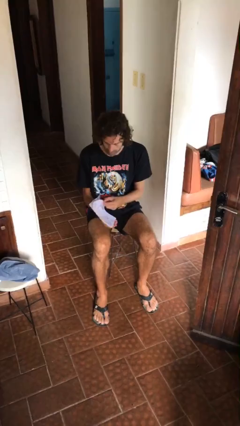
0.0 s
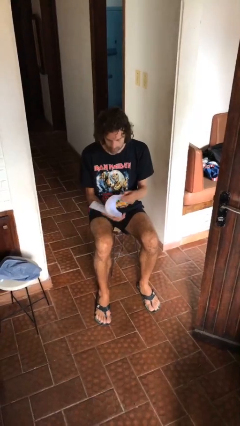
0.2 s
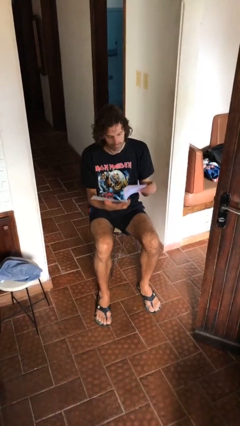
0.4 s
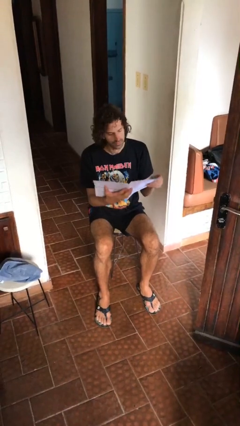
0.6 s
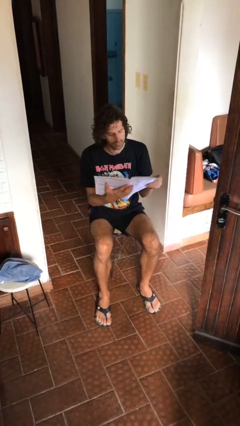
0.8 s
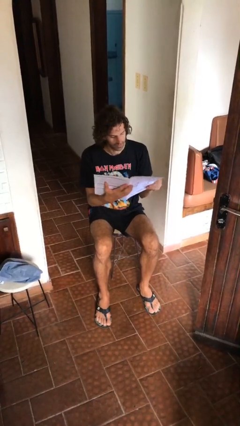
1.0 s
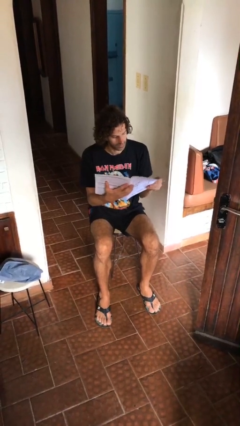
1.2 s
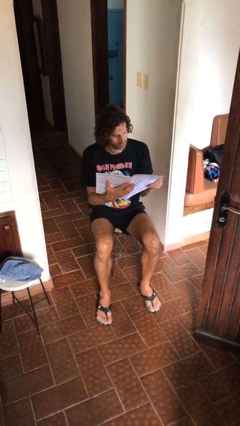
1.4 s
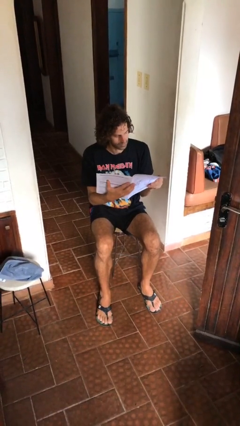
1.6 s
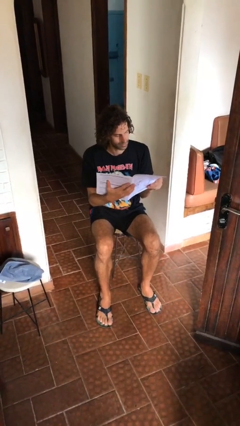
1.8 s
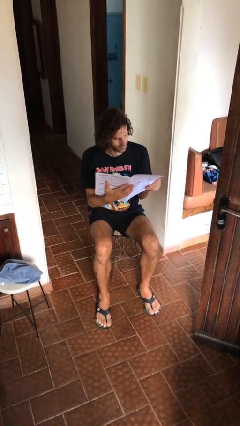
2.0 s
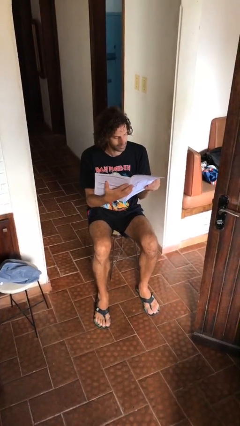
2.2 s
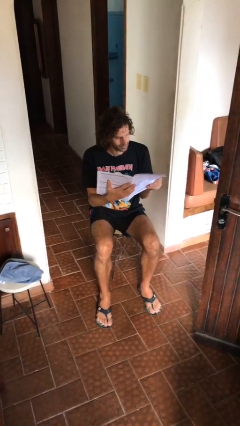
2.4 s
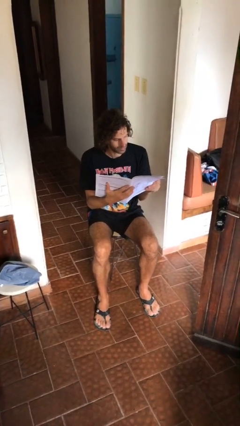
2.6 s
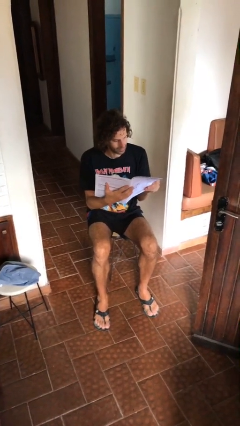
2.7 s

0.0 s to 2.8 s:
person reads document

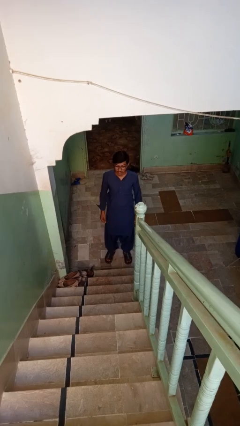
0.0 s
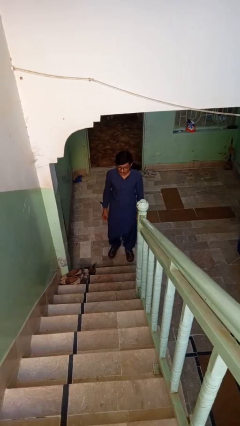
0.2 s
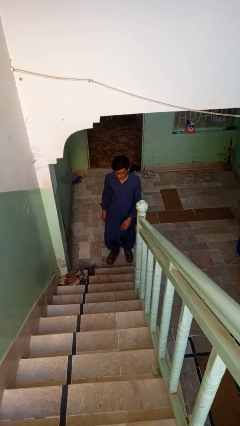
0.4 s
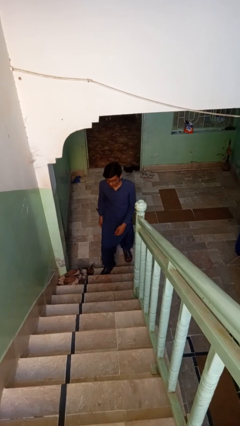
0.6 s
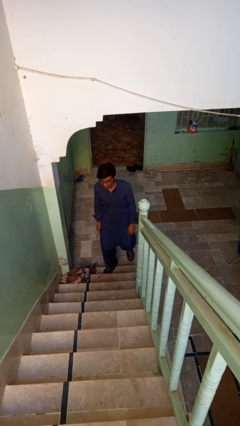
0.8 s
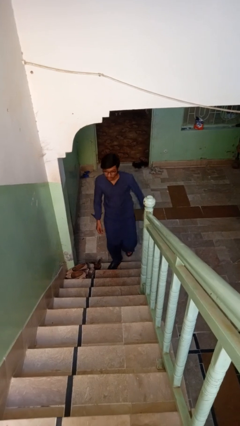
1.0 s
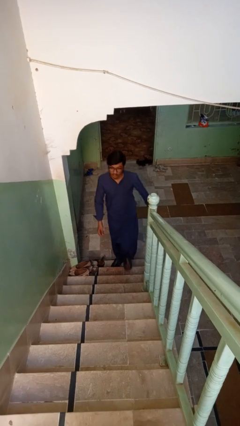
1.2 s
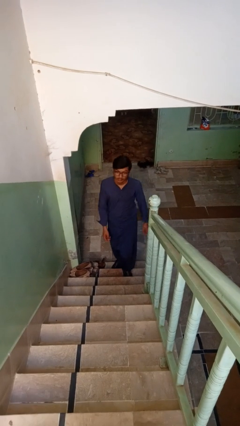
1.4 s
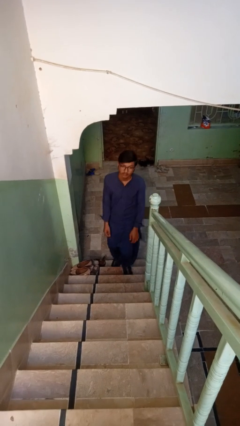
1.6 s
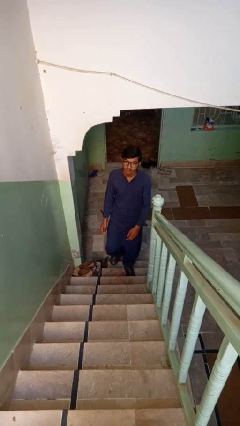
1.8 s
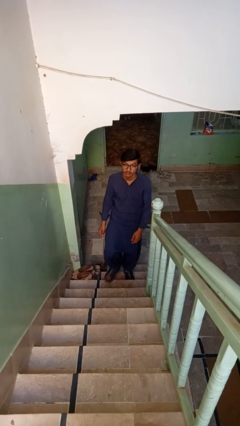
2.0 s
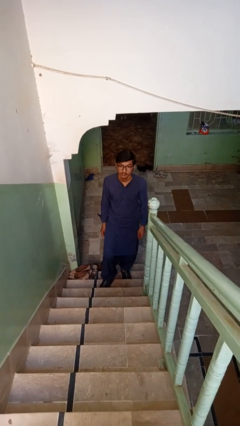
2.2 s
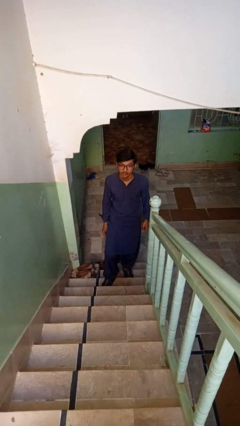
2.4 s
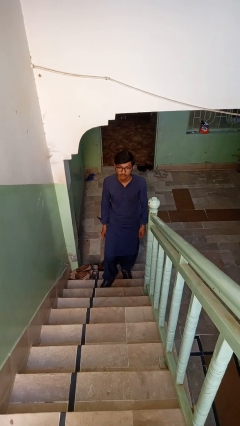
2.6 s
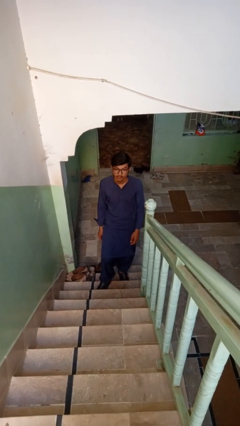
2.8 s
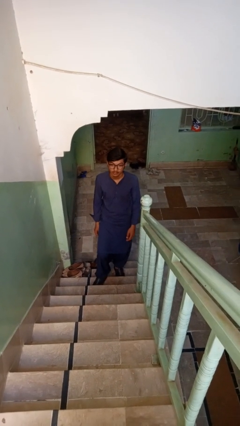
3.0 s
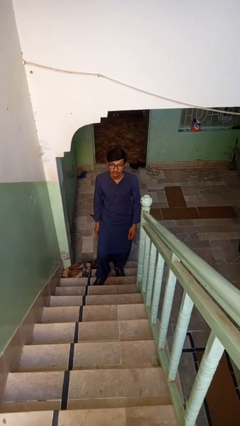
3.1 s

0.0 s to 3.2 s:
person climbs up stairs

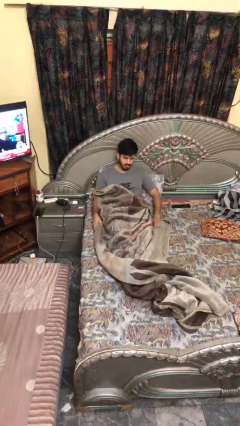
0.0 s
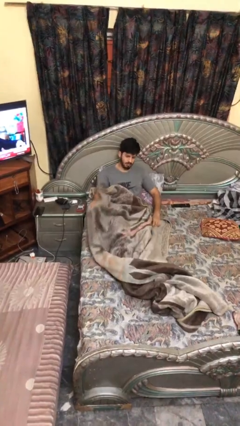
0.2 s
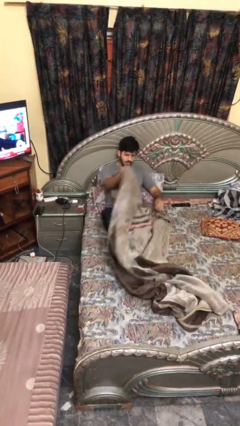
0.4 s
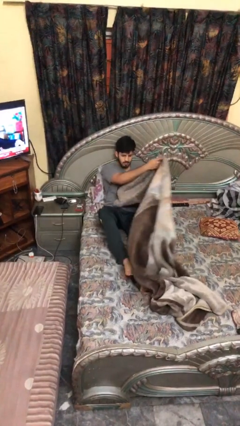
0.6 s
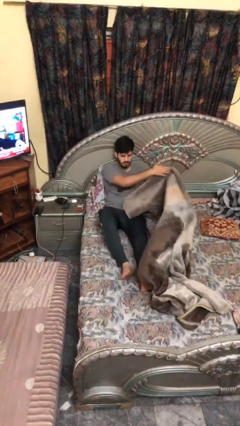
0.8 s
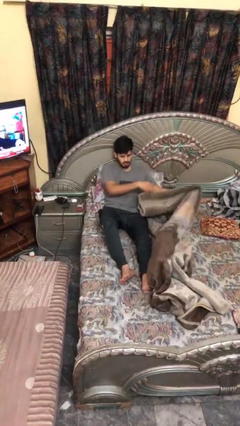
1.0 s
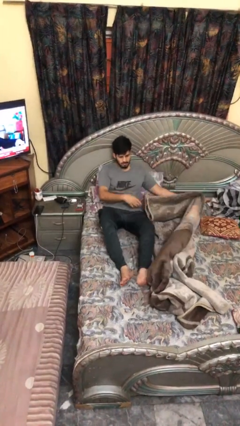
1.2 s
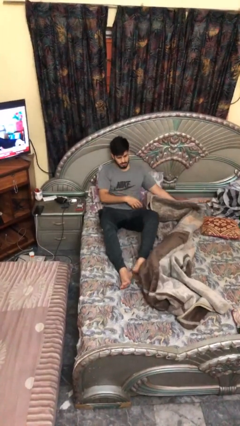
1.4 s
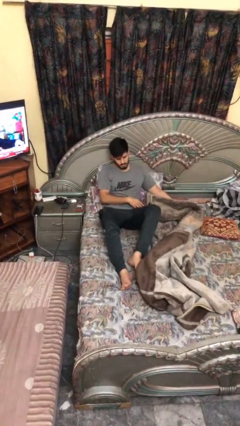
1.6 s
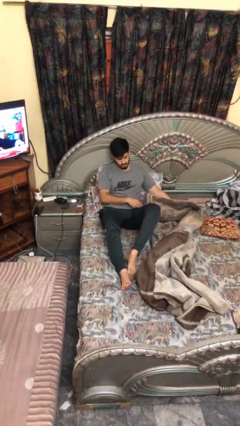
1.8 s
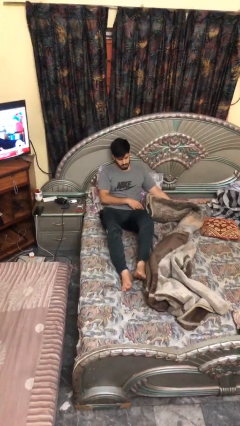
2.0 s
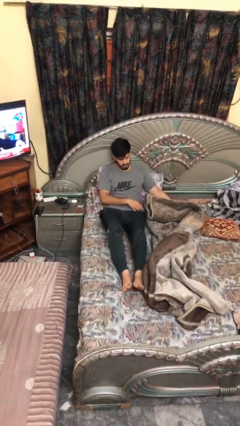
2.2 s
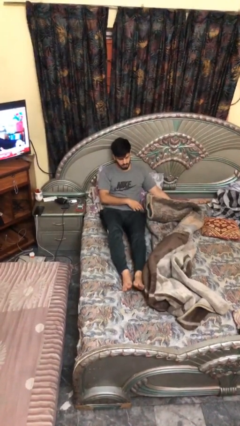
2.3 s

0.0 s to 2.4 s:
person uncovers with blanket

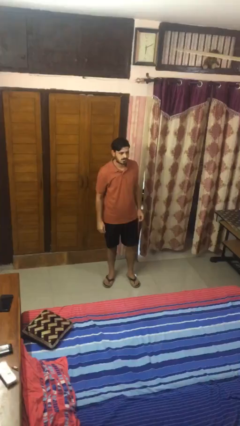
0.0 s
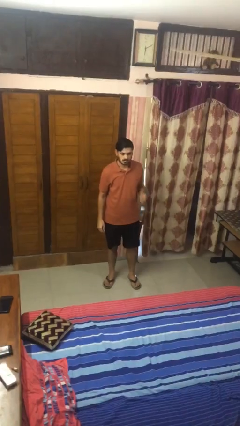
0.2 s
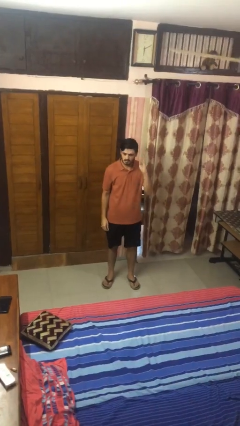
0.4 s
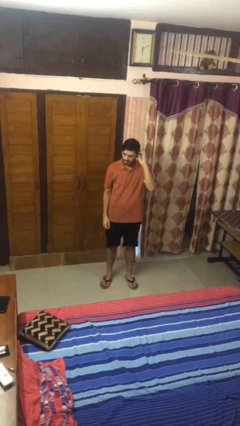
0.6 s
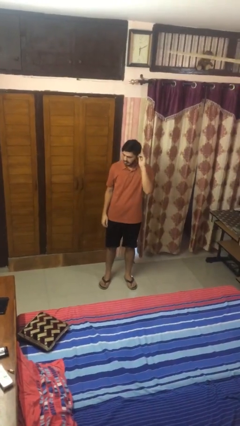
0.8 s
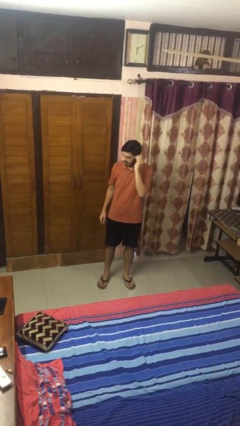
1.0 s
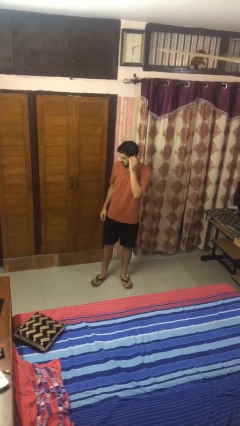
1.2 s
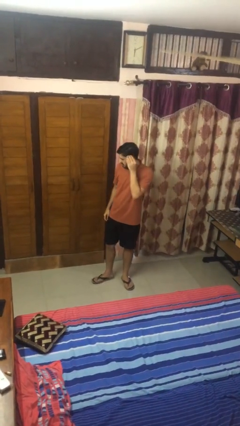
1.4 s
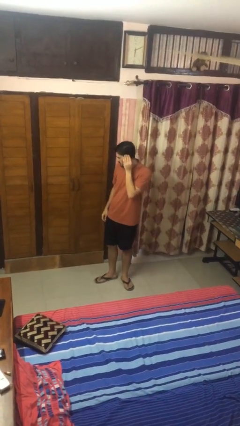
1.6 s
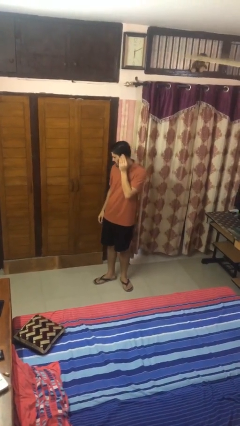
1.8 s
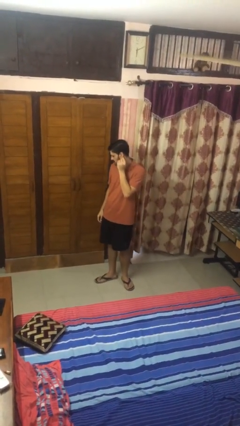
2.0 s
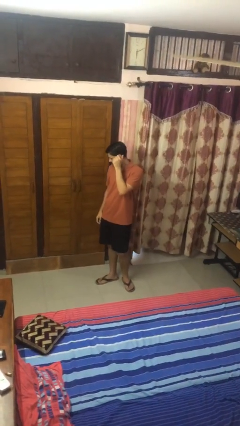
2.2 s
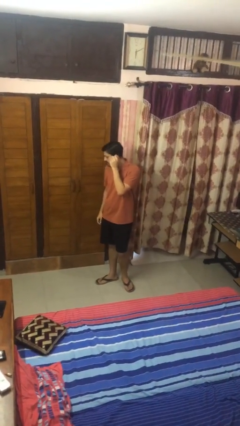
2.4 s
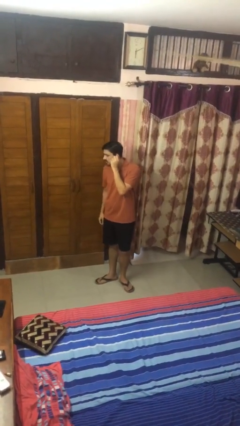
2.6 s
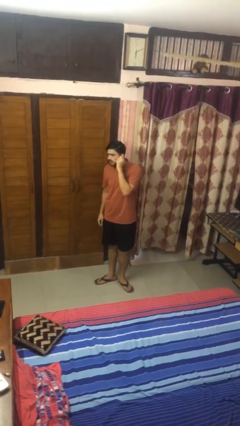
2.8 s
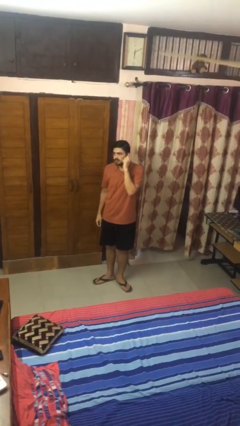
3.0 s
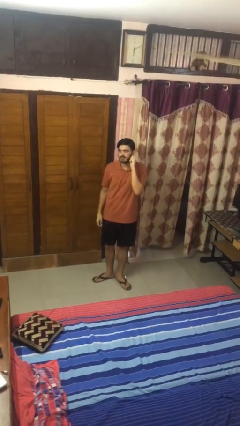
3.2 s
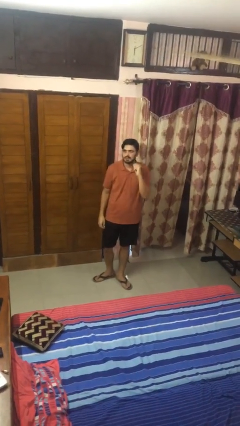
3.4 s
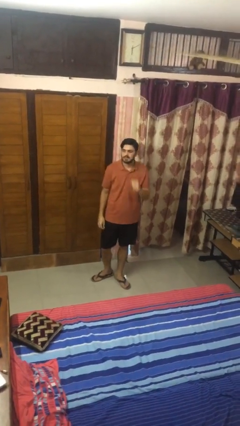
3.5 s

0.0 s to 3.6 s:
person touches earlobe

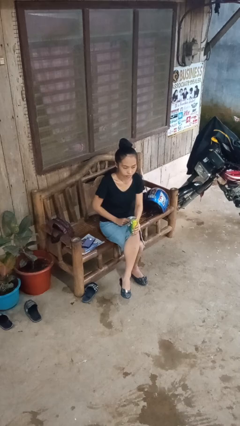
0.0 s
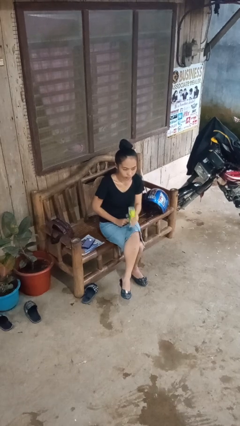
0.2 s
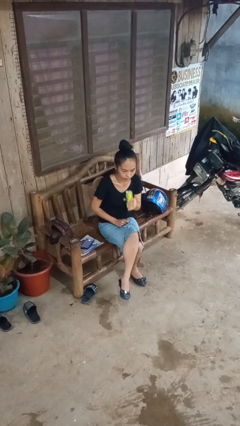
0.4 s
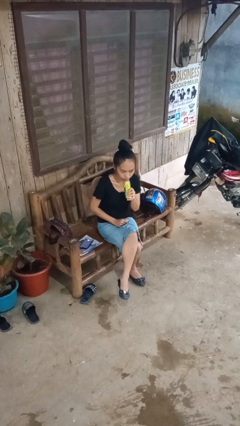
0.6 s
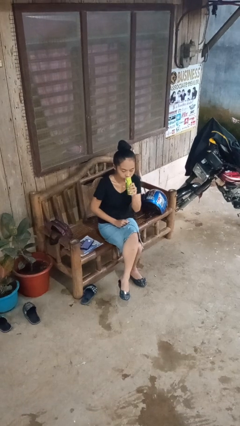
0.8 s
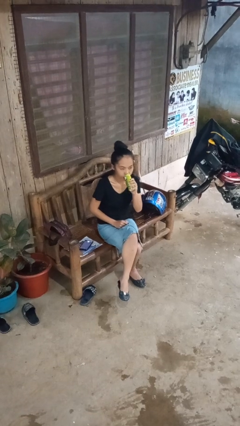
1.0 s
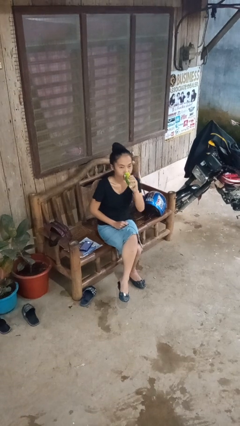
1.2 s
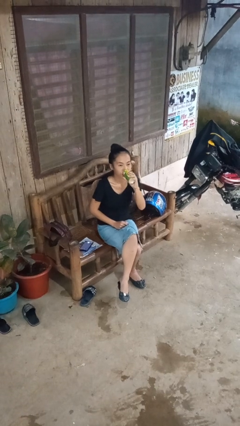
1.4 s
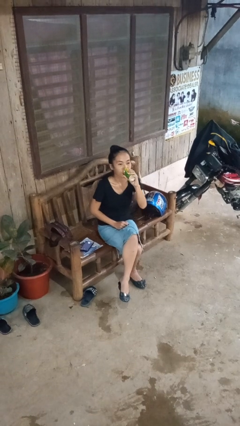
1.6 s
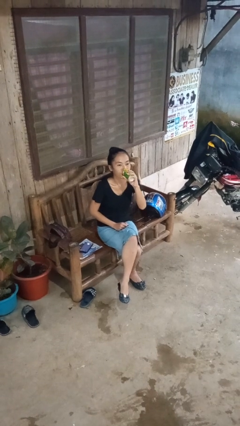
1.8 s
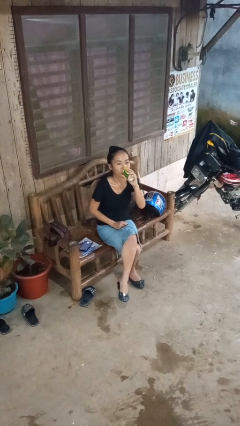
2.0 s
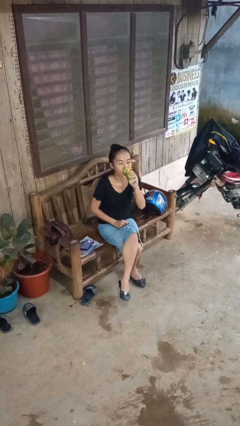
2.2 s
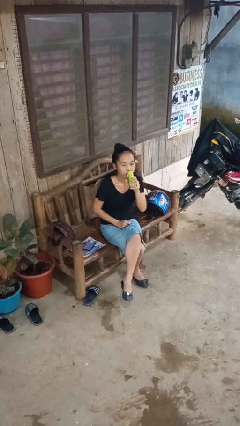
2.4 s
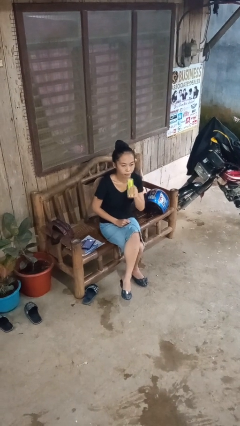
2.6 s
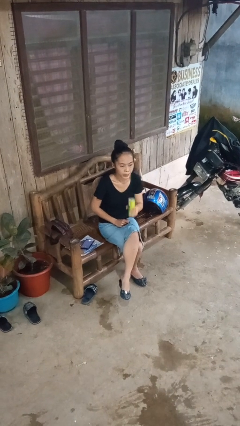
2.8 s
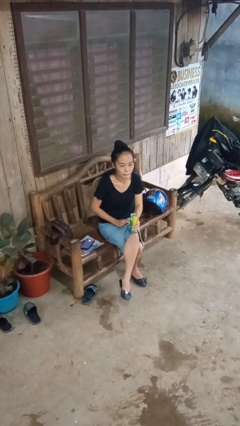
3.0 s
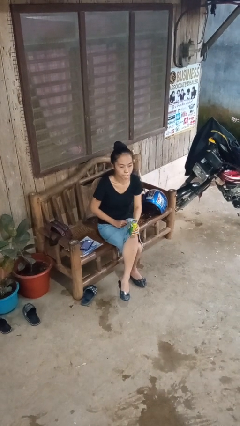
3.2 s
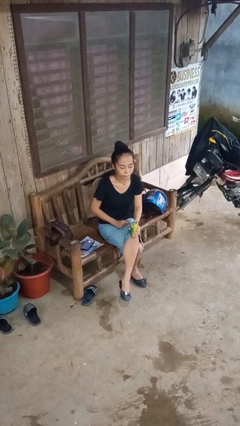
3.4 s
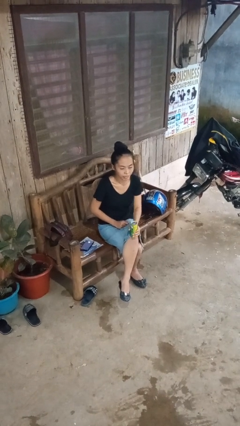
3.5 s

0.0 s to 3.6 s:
person drinks from beverage can

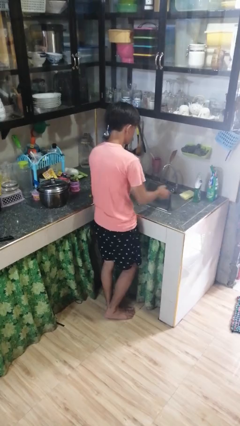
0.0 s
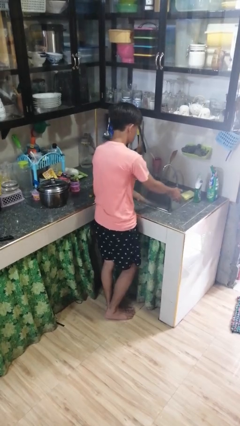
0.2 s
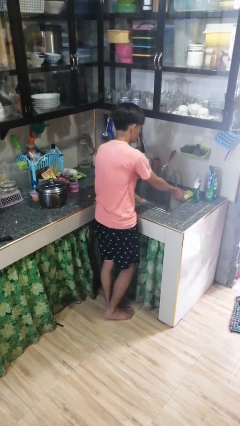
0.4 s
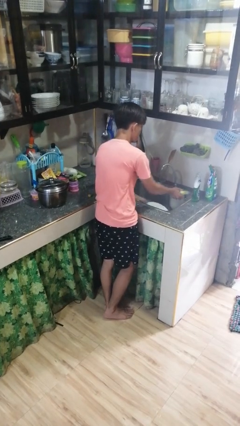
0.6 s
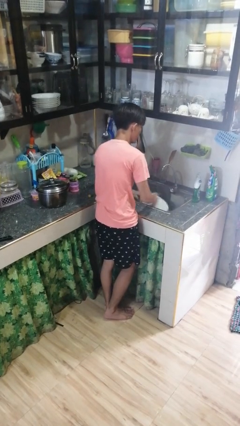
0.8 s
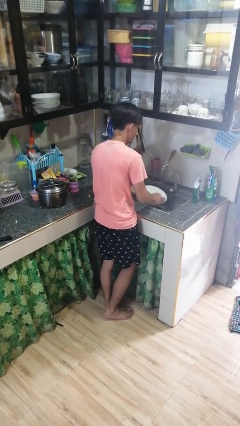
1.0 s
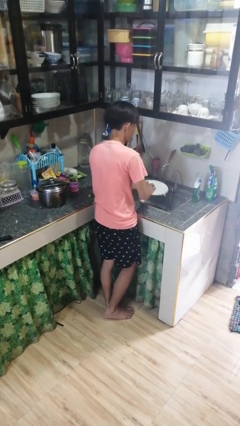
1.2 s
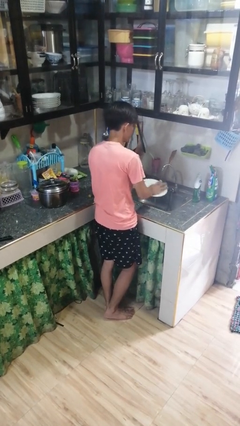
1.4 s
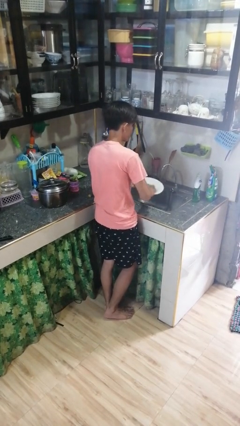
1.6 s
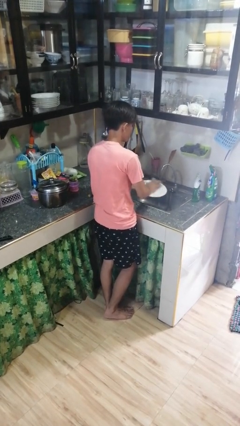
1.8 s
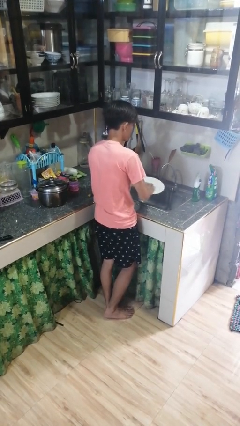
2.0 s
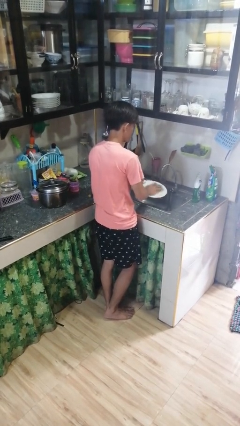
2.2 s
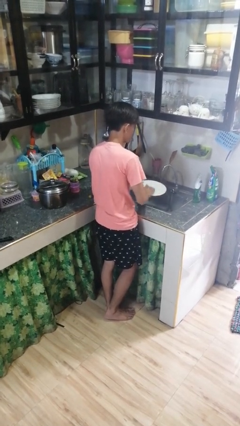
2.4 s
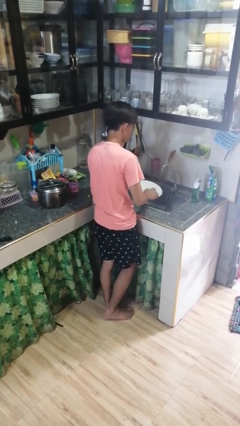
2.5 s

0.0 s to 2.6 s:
person washes dish
